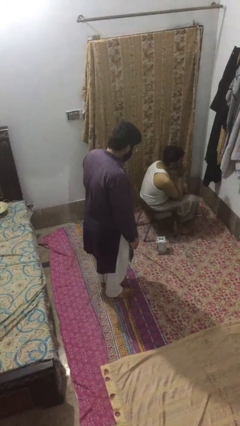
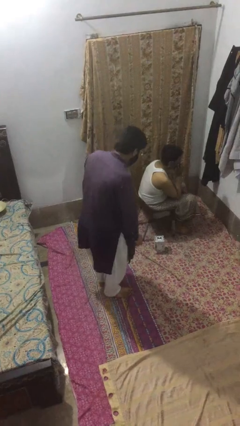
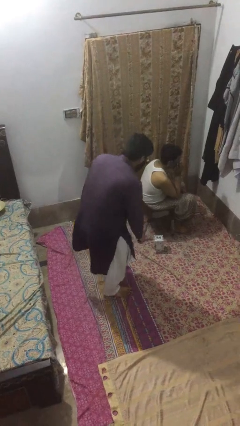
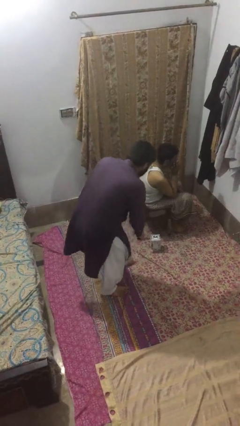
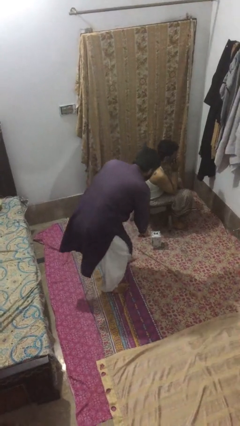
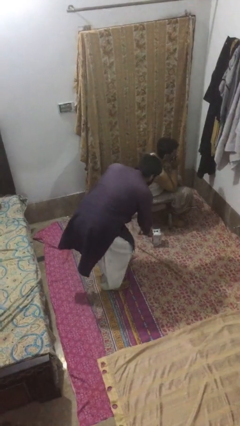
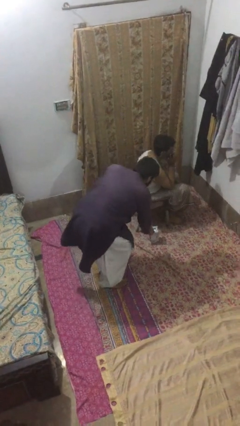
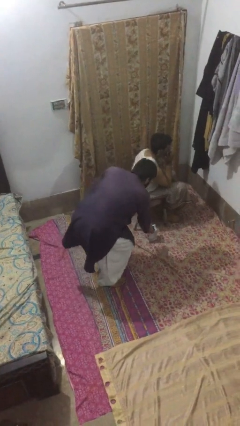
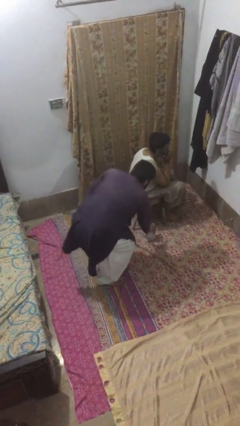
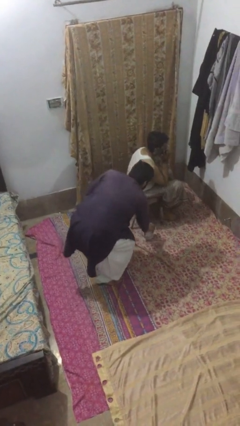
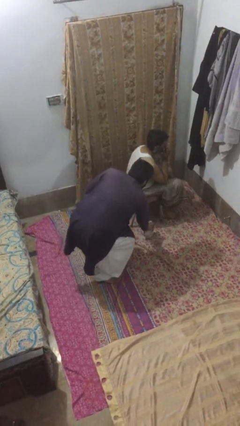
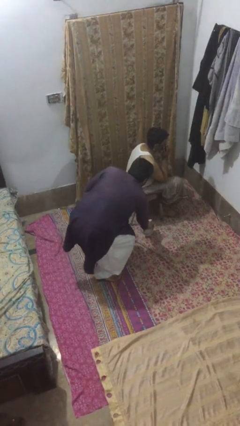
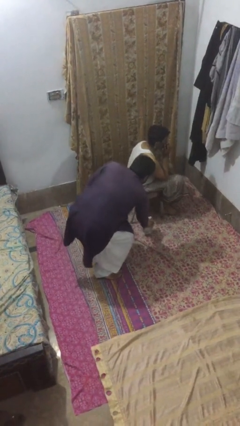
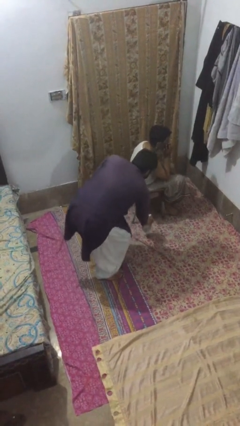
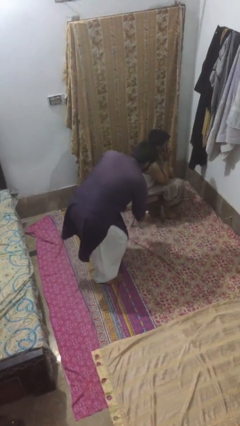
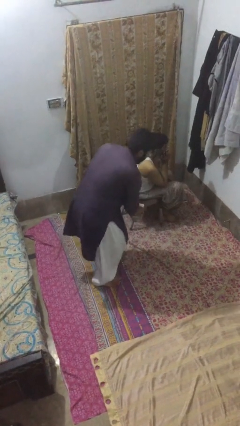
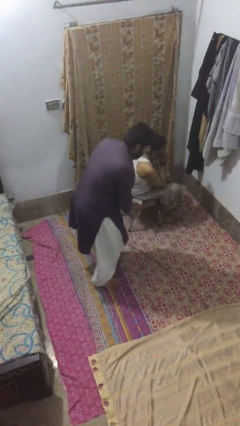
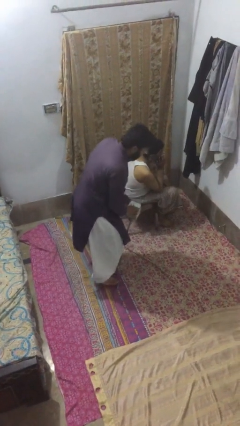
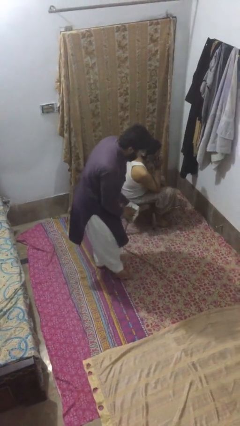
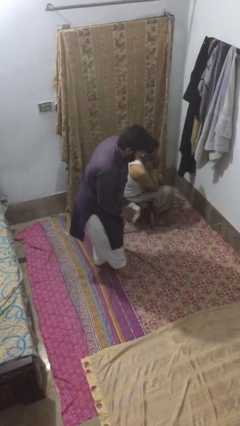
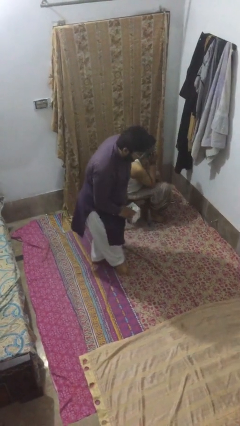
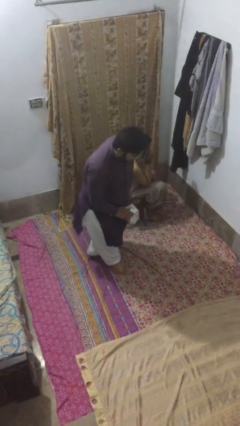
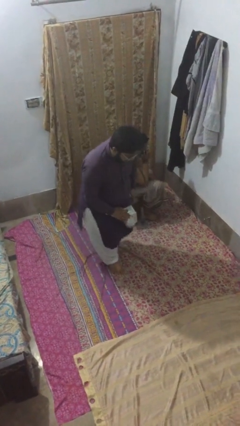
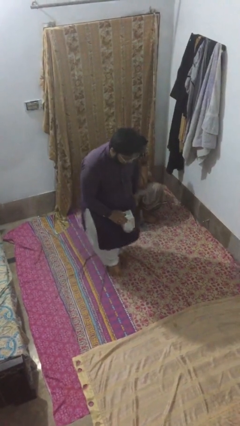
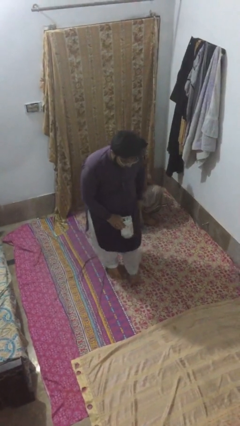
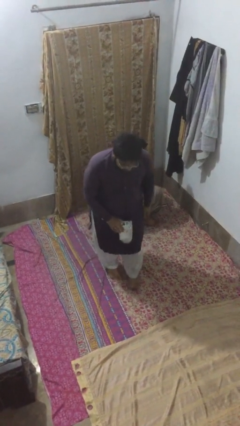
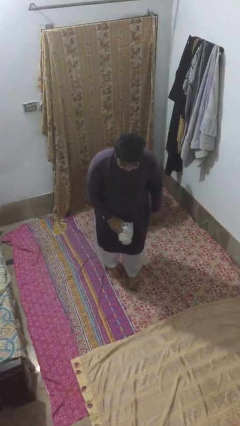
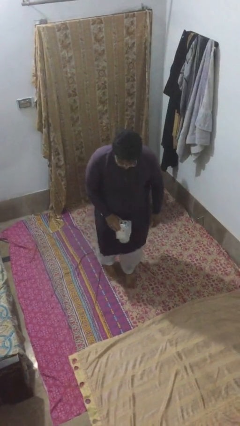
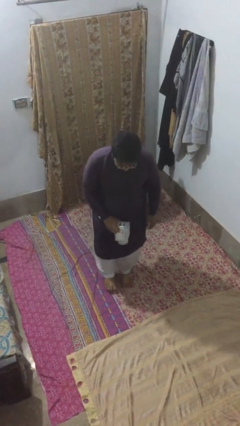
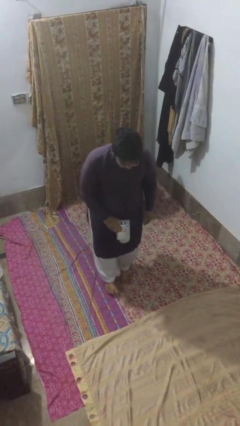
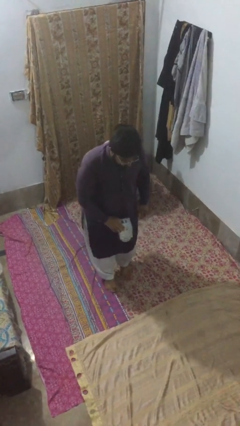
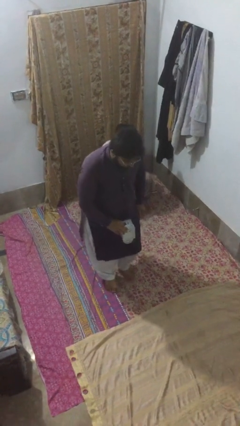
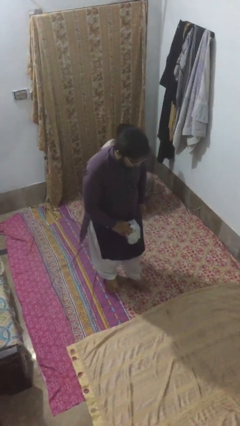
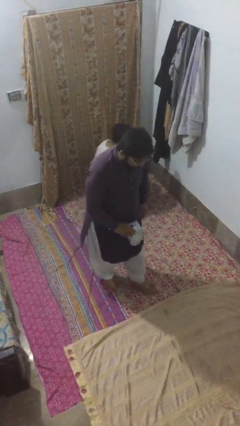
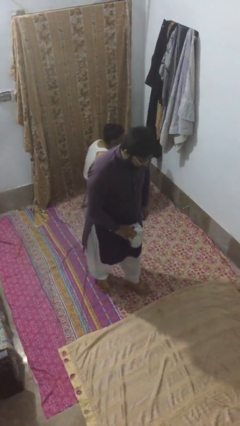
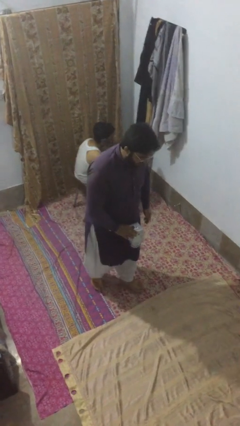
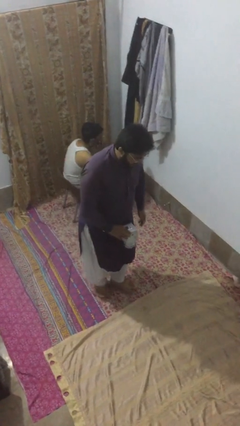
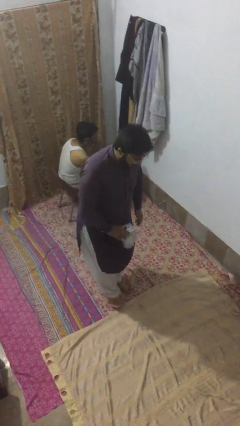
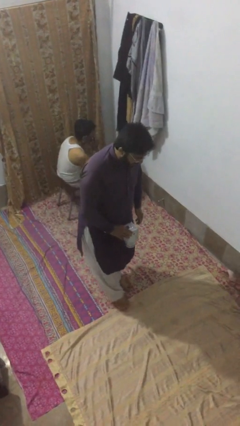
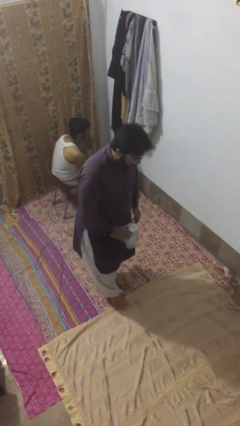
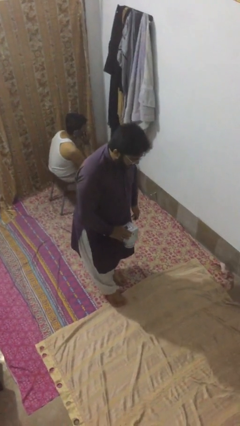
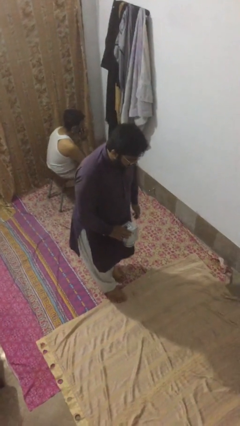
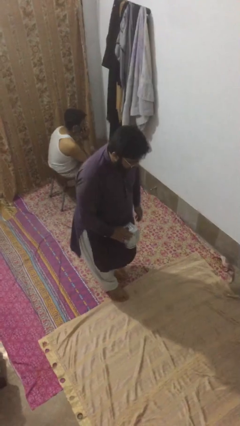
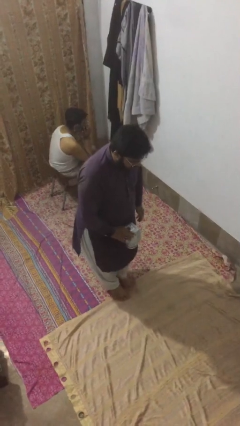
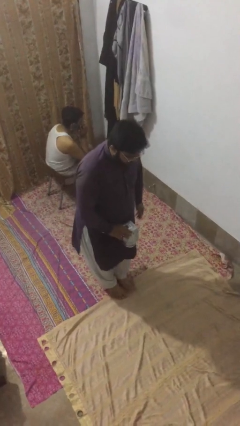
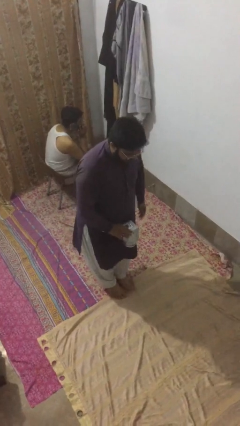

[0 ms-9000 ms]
person steals object from person

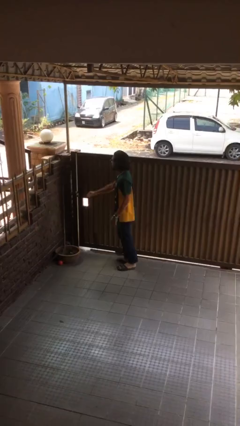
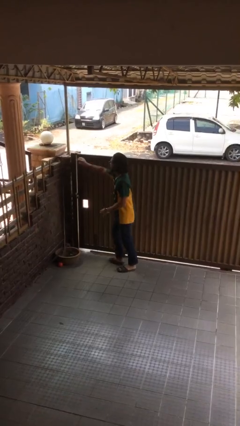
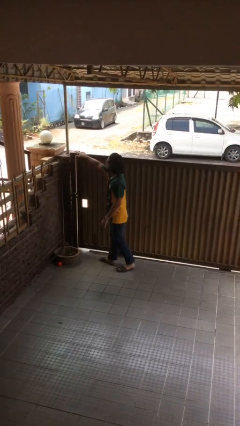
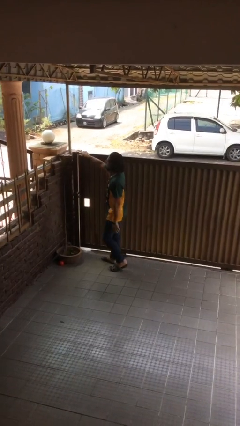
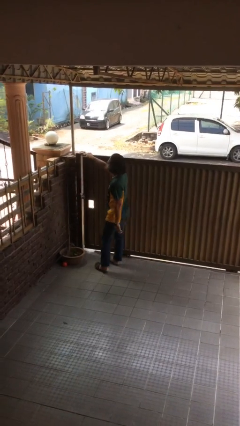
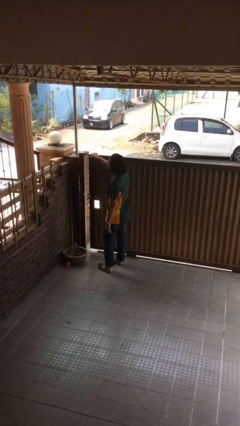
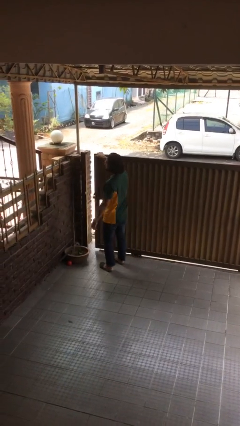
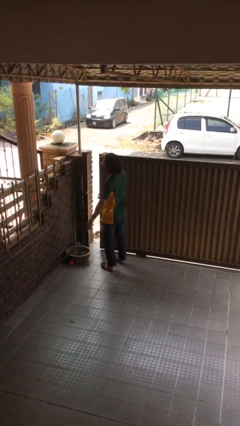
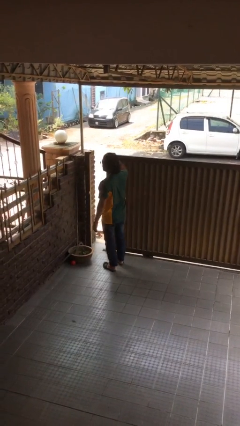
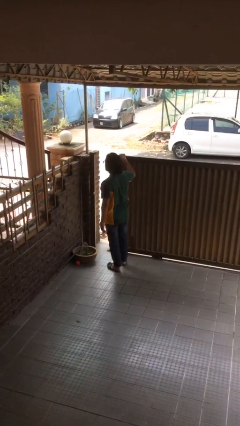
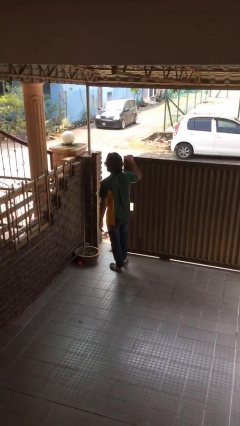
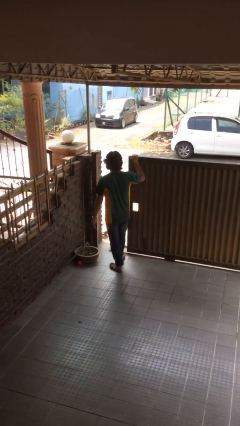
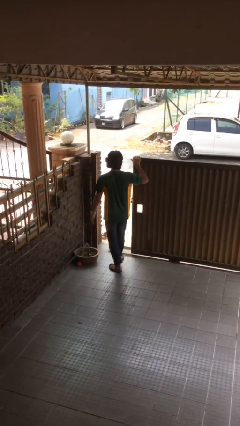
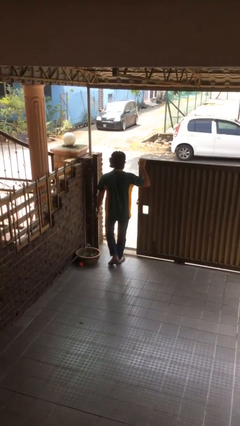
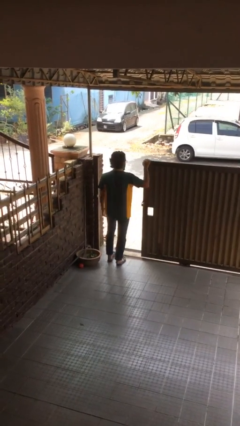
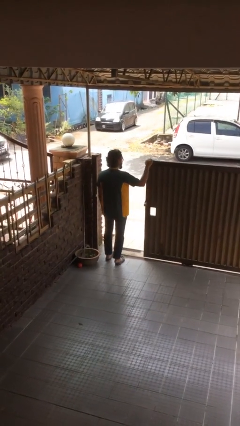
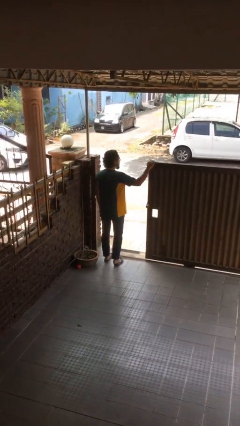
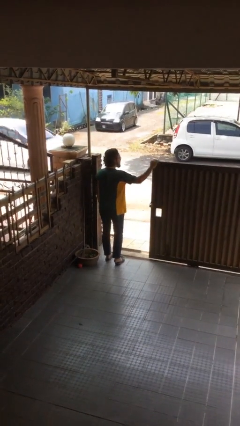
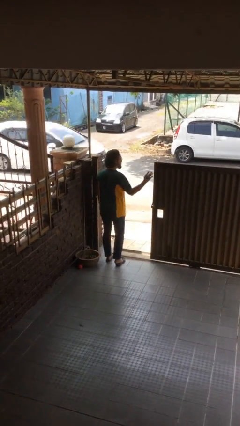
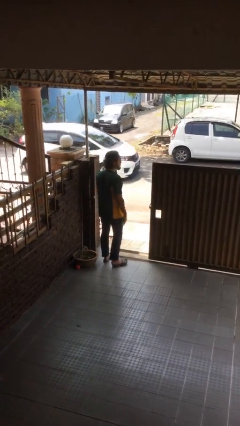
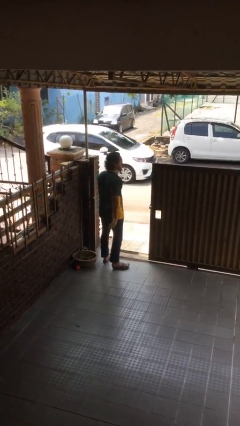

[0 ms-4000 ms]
person opens facility door

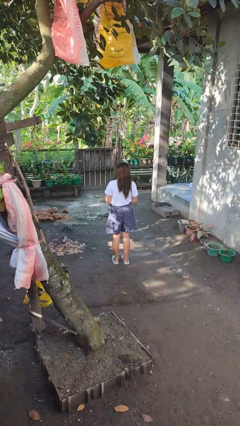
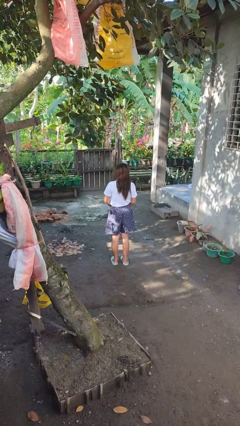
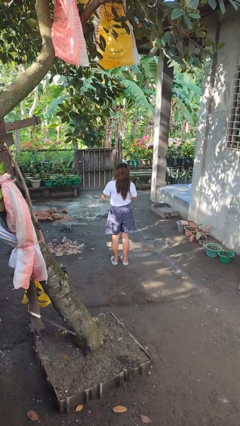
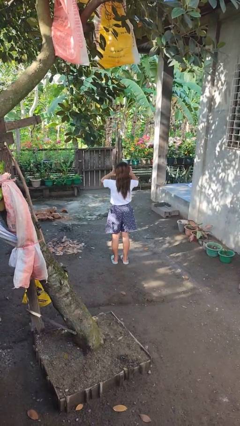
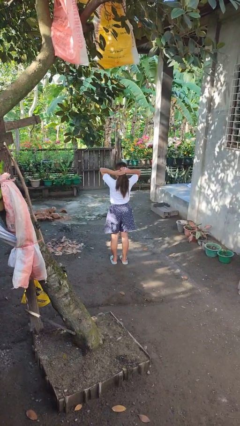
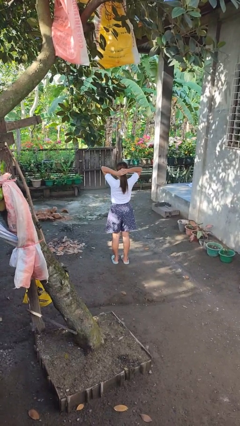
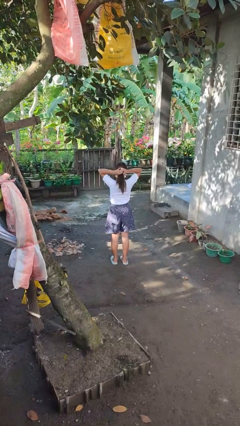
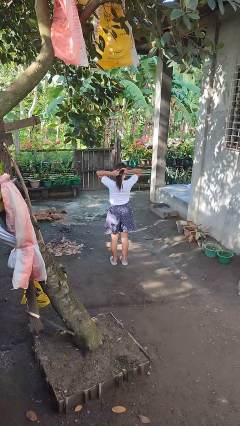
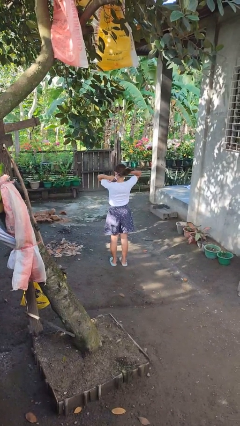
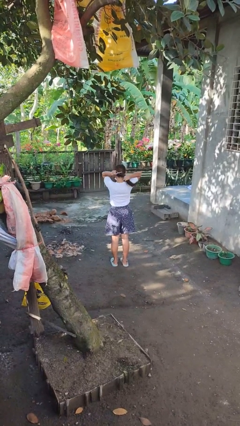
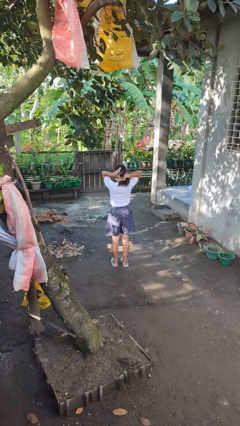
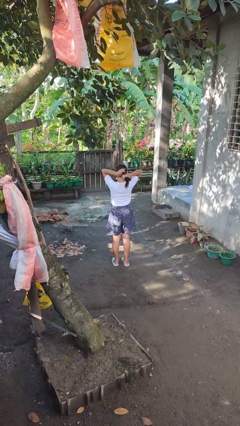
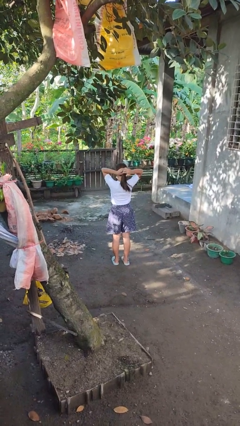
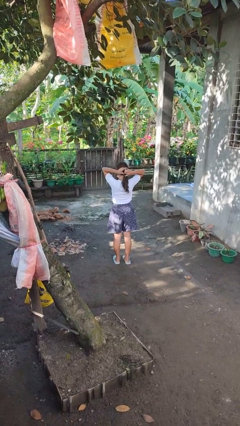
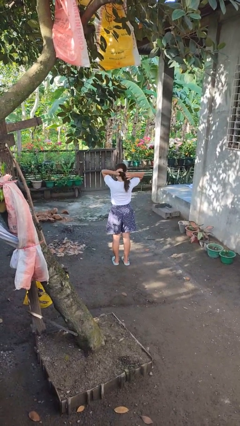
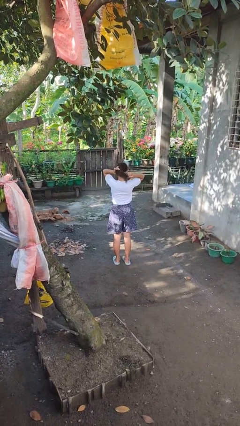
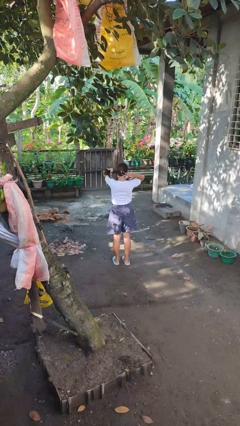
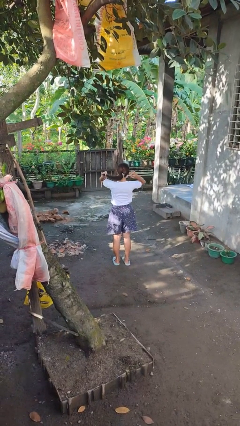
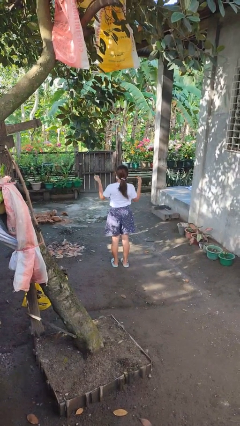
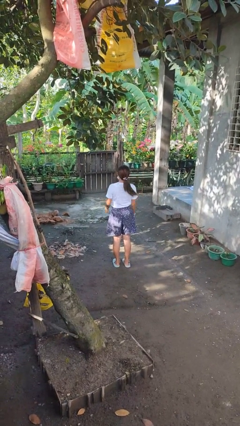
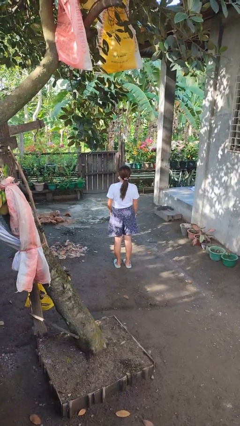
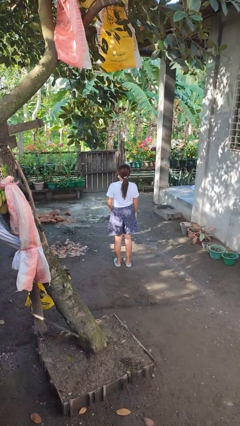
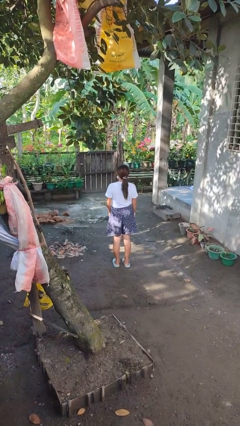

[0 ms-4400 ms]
person puts hair in ponytail

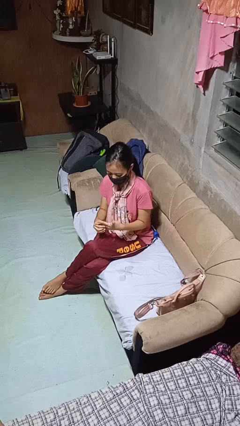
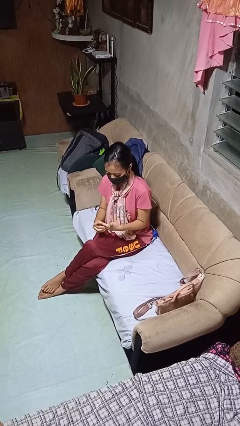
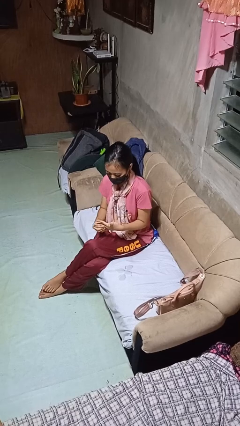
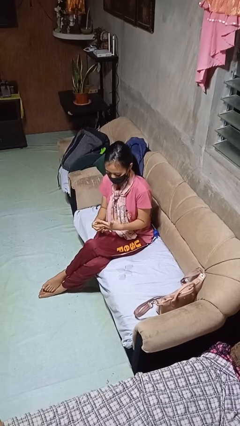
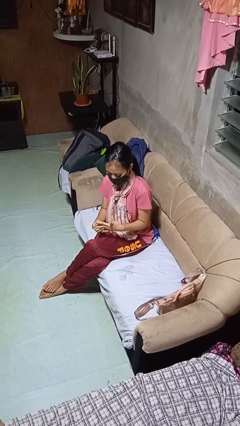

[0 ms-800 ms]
person takes off ring
